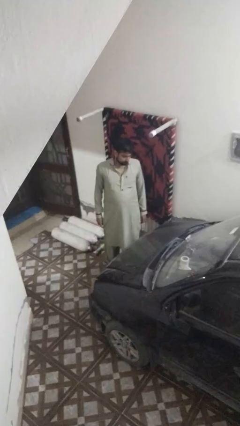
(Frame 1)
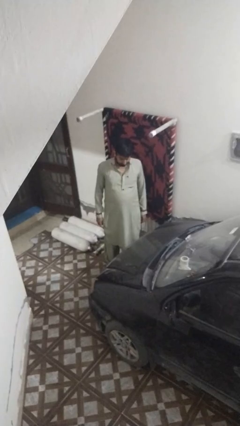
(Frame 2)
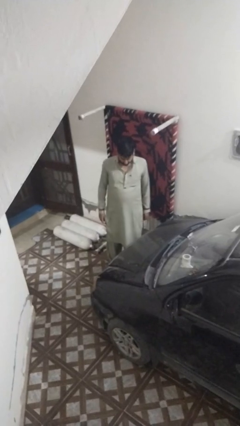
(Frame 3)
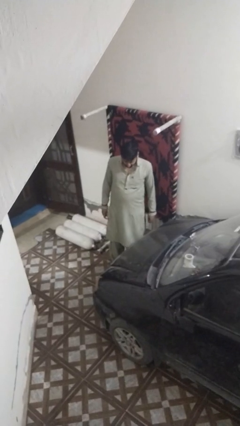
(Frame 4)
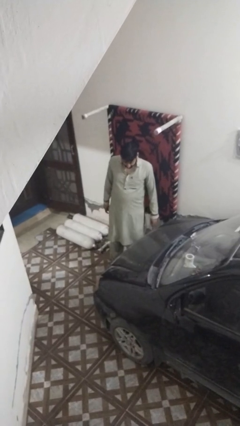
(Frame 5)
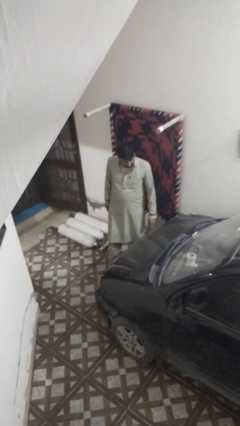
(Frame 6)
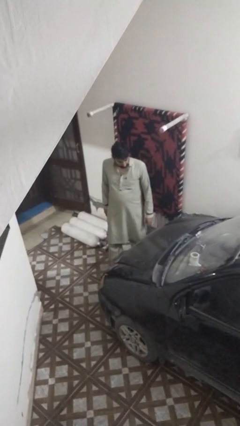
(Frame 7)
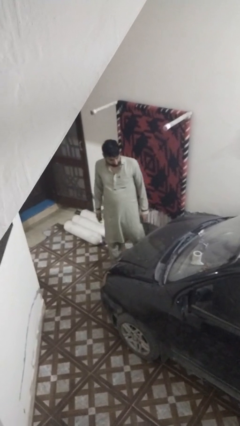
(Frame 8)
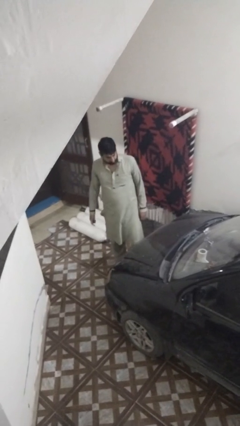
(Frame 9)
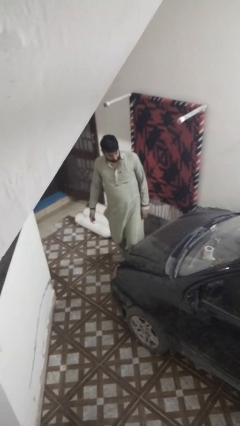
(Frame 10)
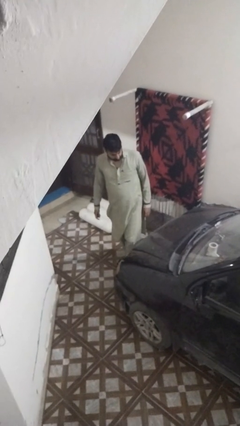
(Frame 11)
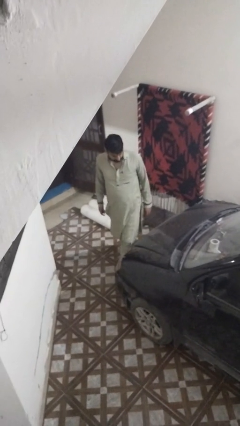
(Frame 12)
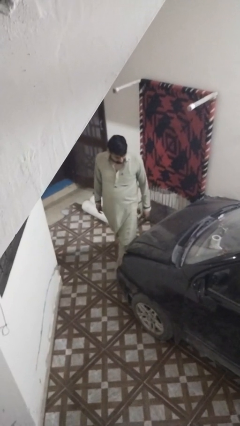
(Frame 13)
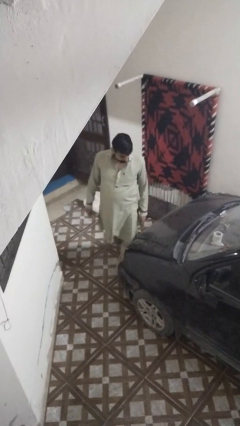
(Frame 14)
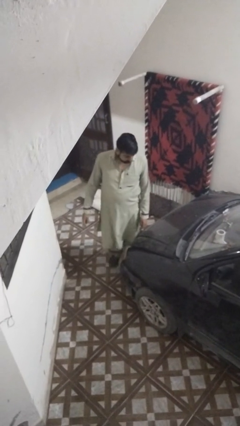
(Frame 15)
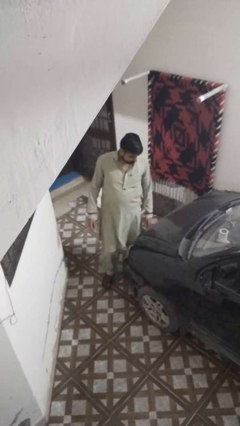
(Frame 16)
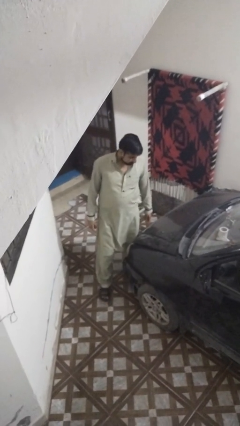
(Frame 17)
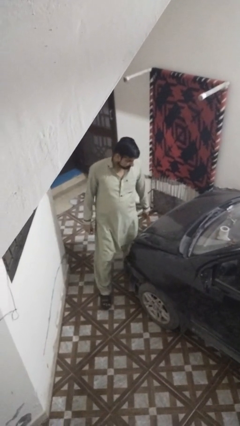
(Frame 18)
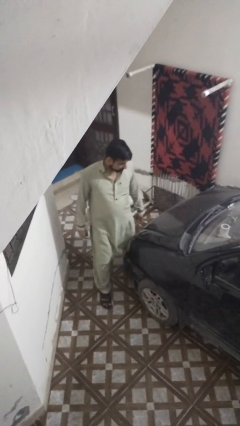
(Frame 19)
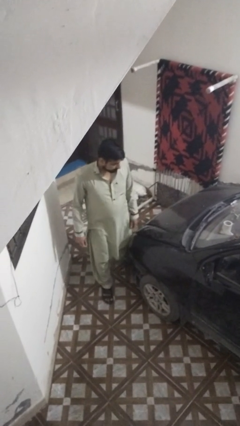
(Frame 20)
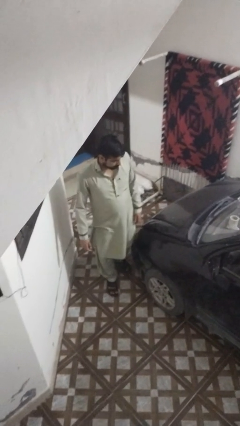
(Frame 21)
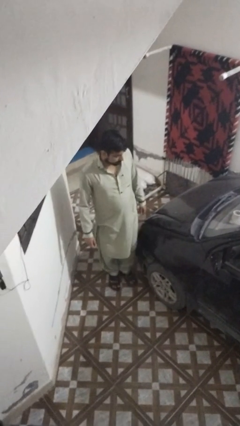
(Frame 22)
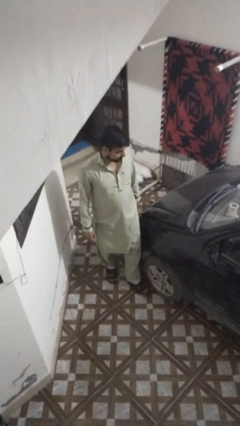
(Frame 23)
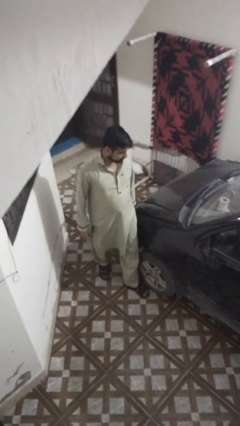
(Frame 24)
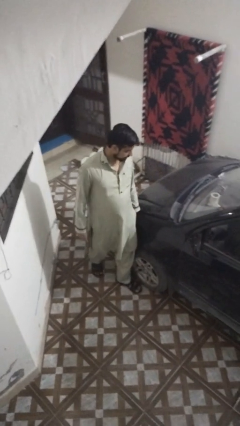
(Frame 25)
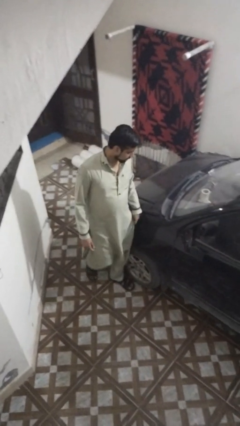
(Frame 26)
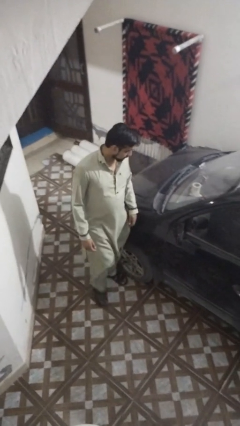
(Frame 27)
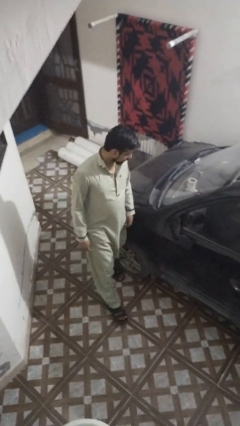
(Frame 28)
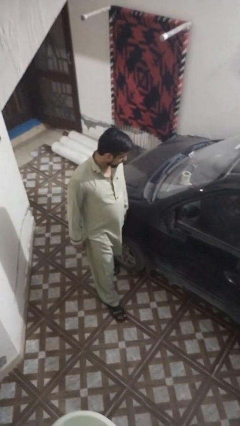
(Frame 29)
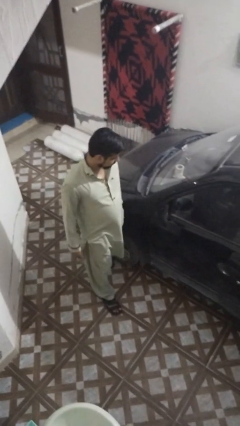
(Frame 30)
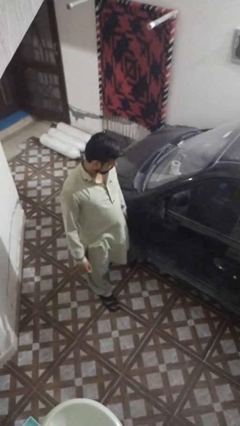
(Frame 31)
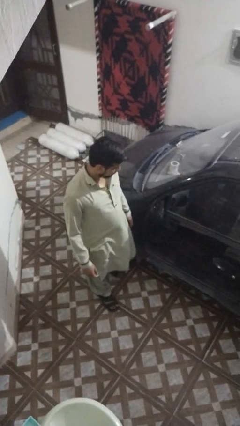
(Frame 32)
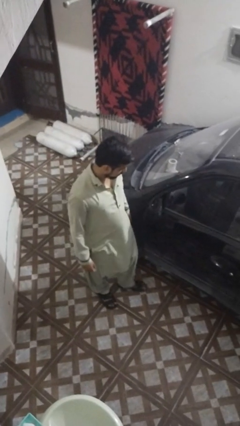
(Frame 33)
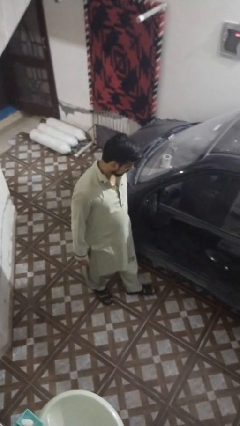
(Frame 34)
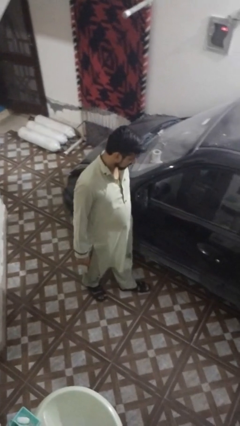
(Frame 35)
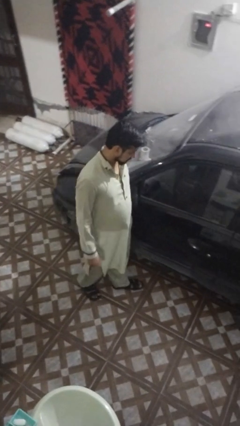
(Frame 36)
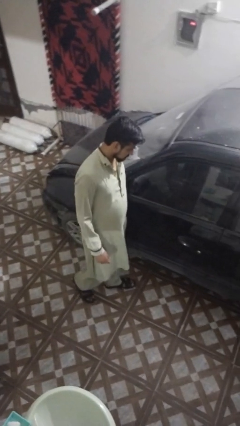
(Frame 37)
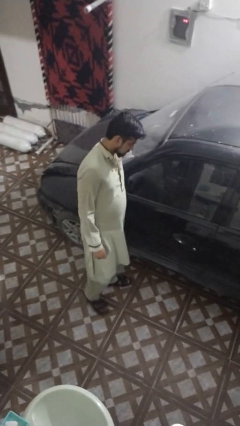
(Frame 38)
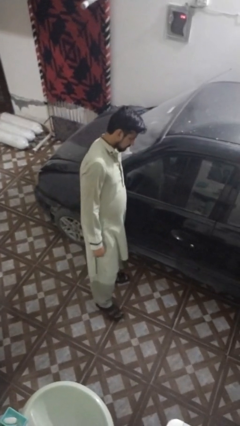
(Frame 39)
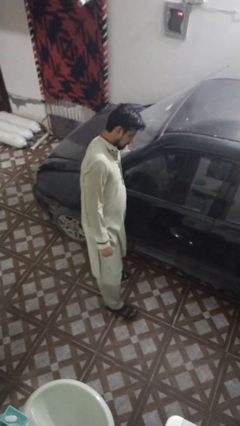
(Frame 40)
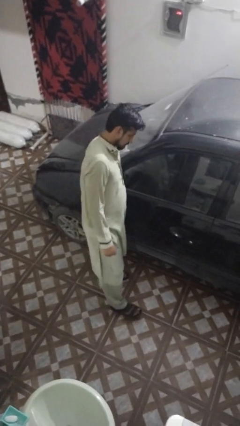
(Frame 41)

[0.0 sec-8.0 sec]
person walks around car

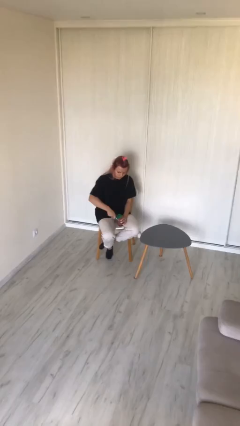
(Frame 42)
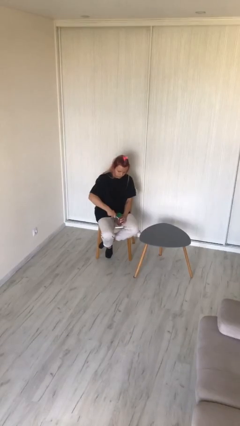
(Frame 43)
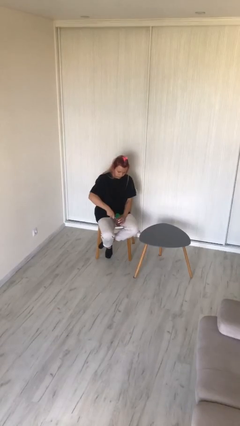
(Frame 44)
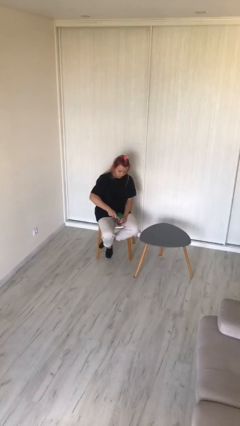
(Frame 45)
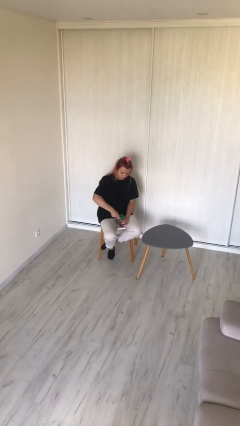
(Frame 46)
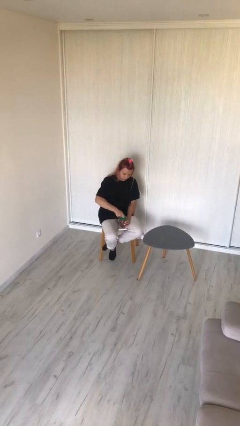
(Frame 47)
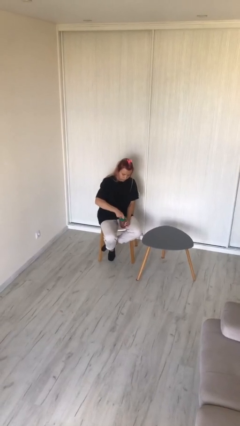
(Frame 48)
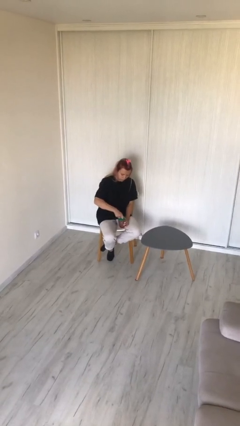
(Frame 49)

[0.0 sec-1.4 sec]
person opens can with can opener

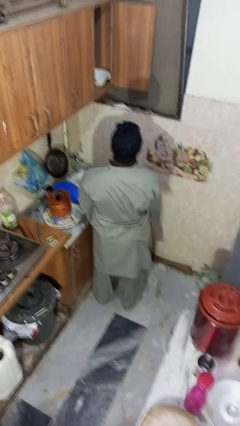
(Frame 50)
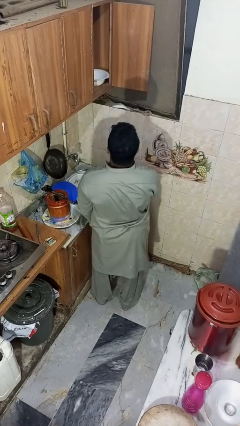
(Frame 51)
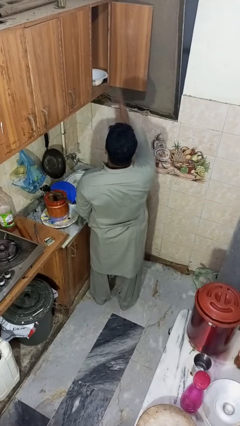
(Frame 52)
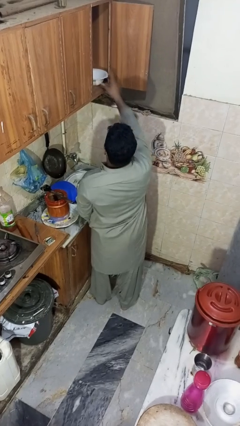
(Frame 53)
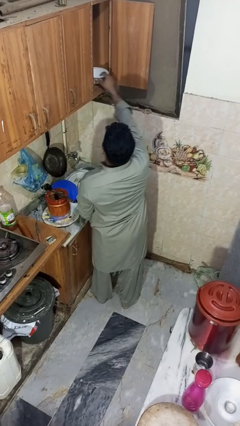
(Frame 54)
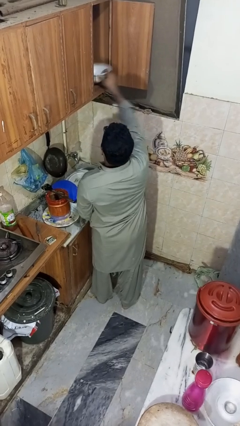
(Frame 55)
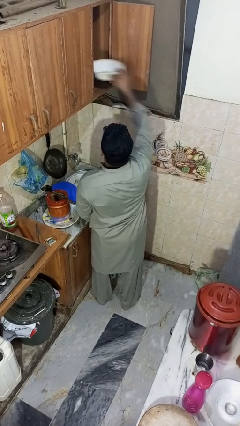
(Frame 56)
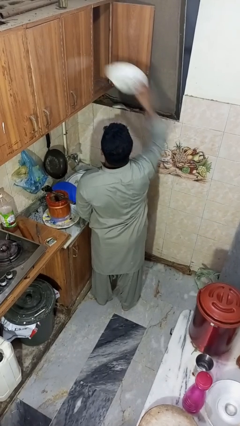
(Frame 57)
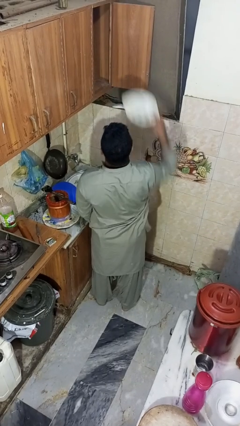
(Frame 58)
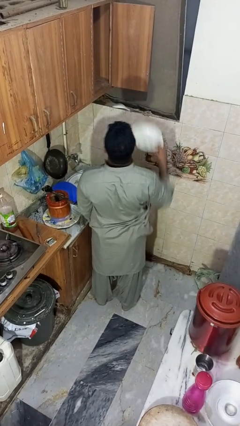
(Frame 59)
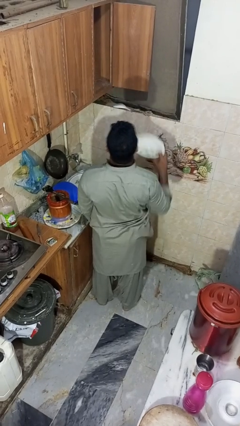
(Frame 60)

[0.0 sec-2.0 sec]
person takes object from cabinet

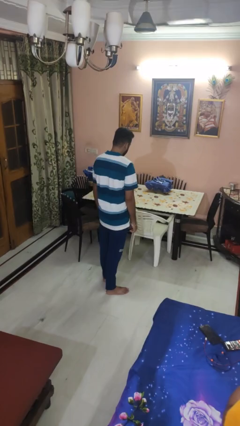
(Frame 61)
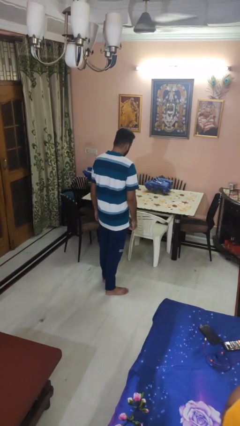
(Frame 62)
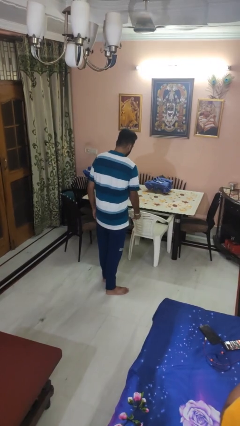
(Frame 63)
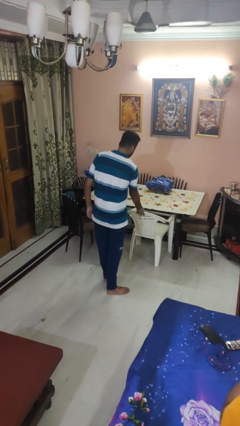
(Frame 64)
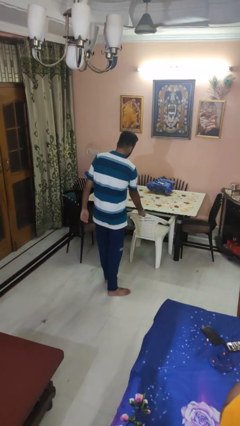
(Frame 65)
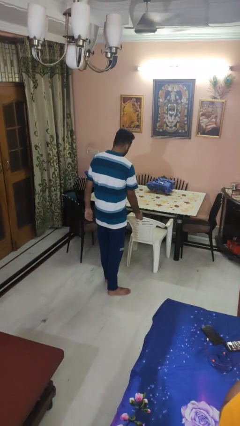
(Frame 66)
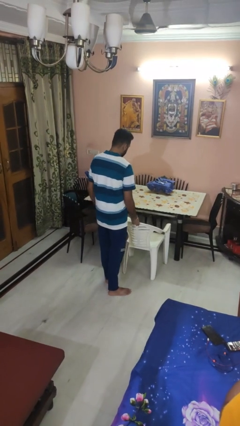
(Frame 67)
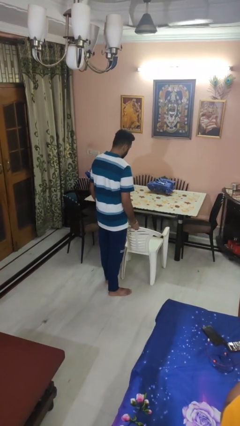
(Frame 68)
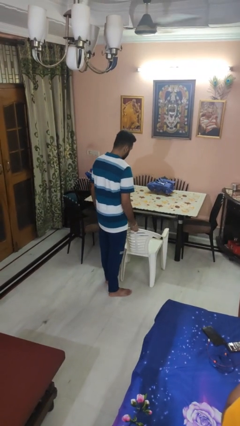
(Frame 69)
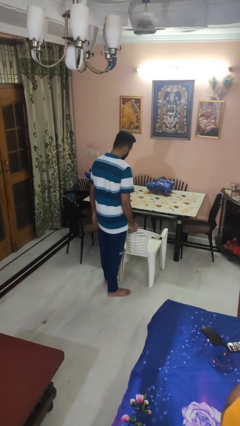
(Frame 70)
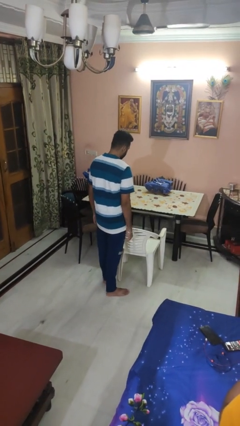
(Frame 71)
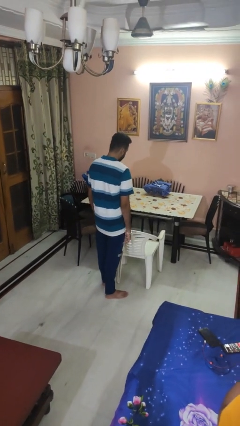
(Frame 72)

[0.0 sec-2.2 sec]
person pulls out chair

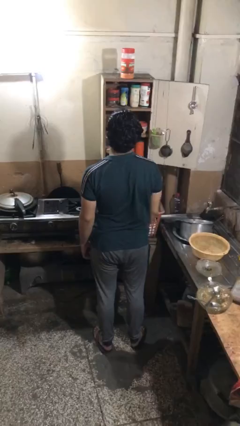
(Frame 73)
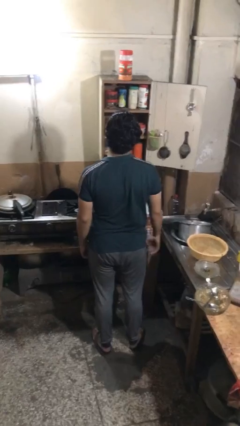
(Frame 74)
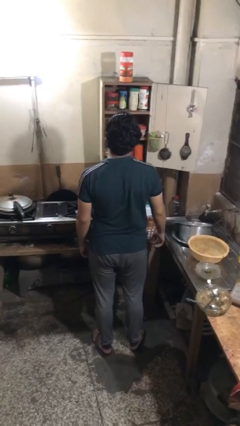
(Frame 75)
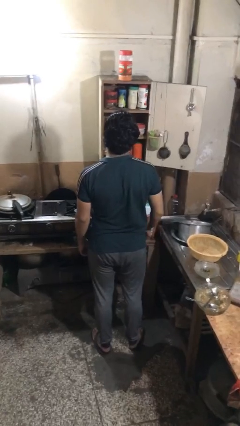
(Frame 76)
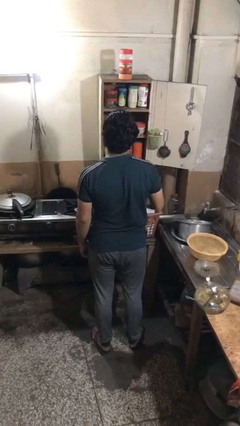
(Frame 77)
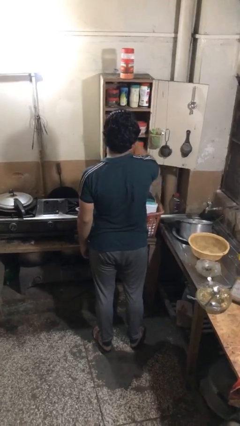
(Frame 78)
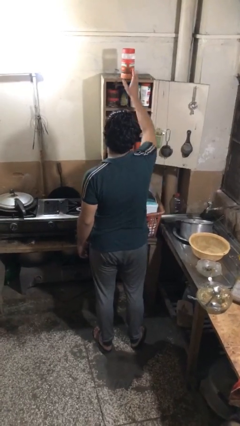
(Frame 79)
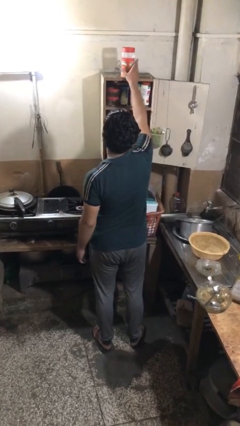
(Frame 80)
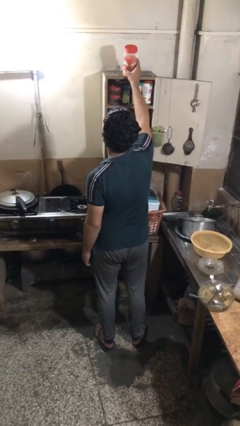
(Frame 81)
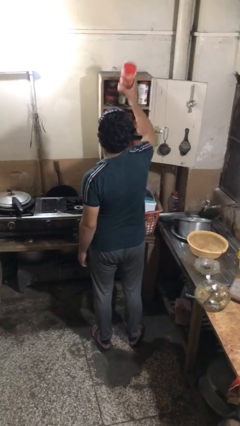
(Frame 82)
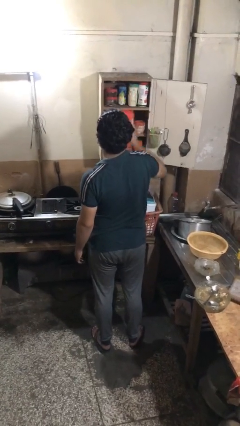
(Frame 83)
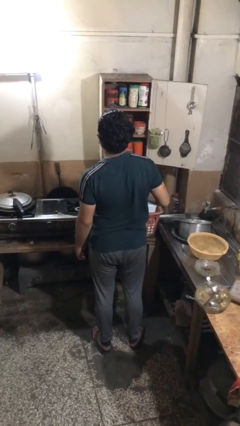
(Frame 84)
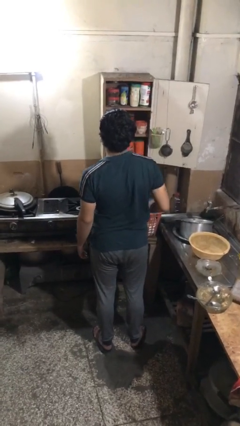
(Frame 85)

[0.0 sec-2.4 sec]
person puts object in cabinet

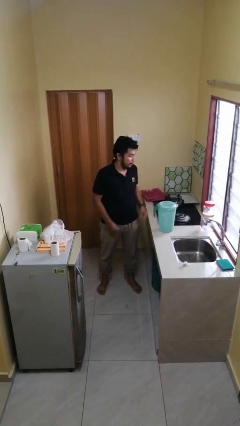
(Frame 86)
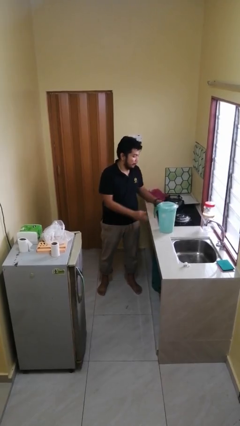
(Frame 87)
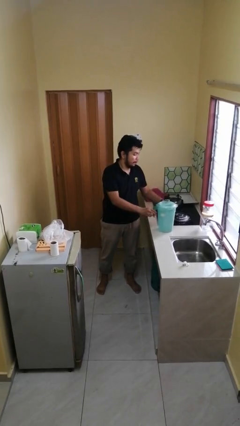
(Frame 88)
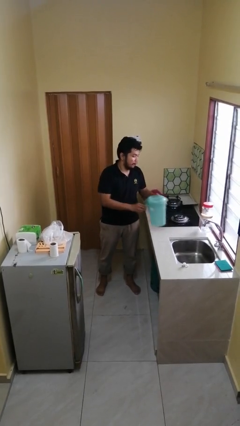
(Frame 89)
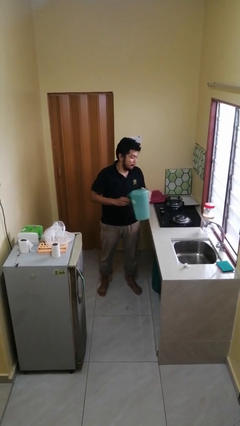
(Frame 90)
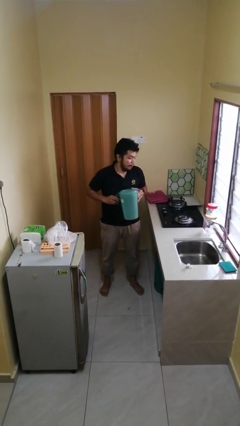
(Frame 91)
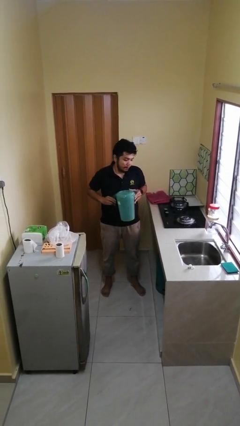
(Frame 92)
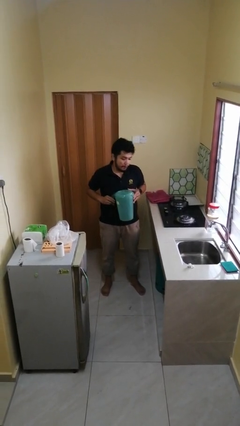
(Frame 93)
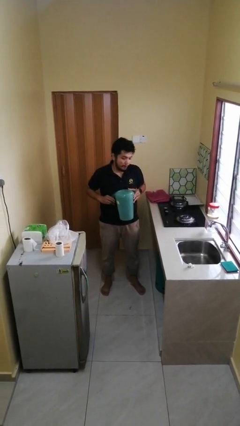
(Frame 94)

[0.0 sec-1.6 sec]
person picks up object from countertop
